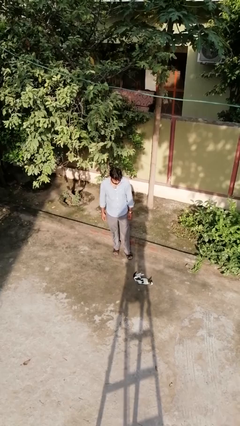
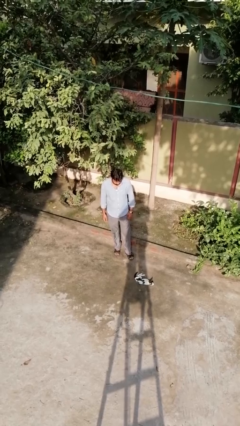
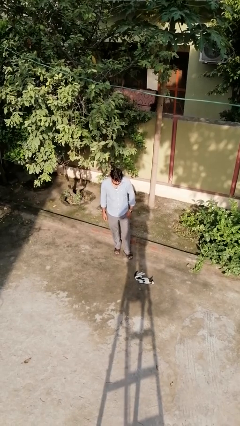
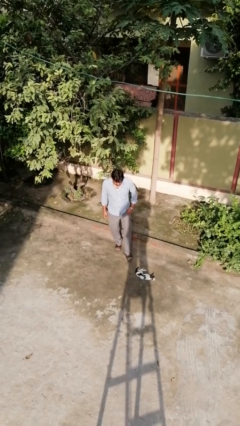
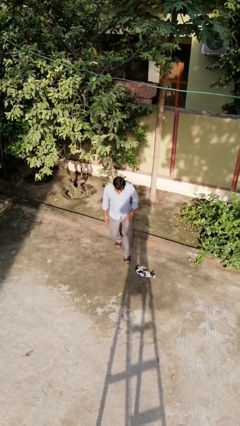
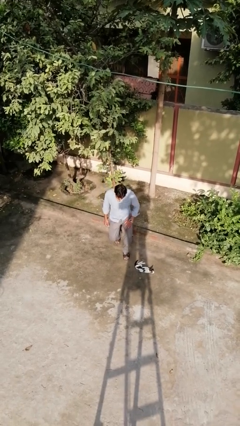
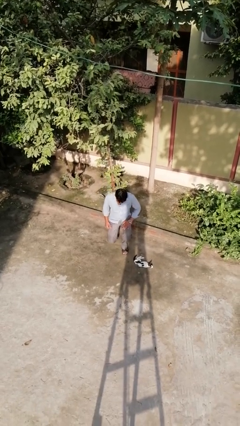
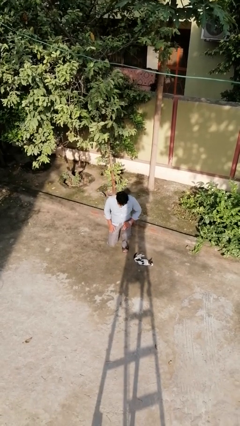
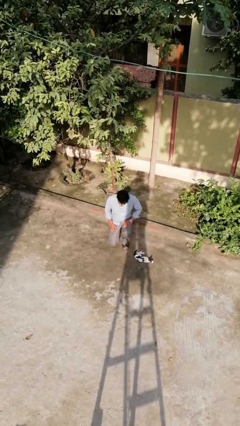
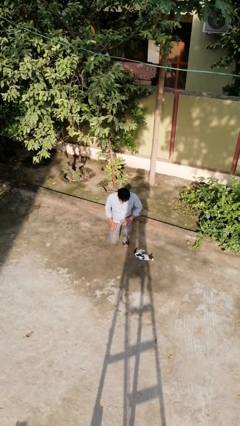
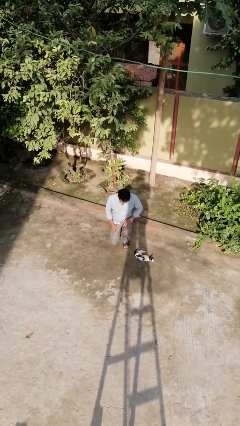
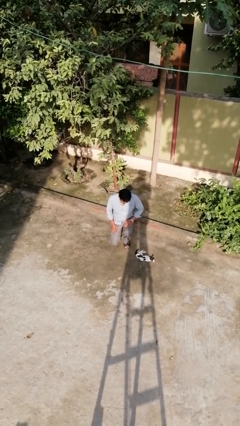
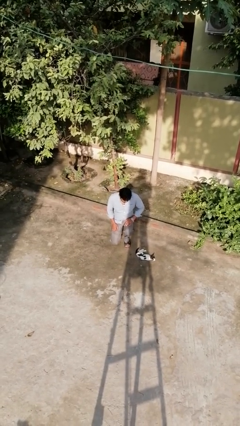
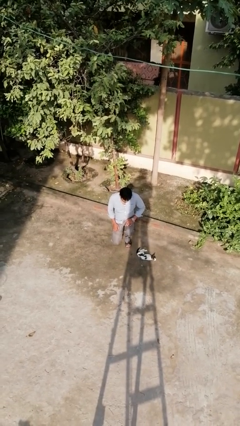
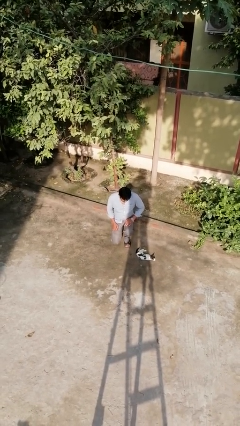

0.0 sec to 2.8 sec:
person kneels

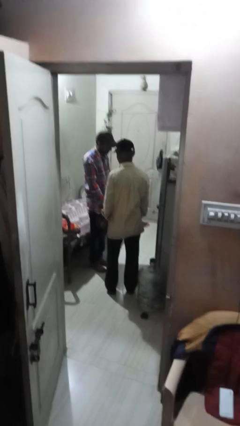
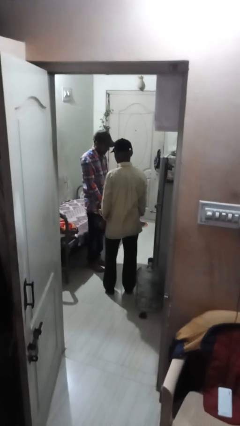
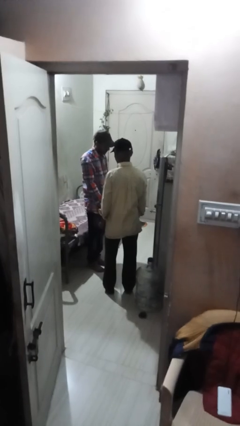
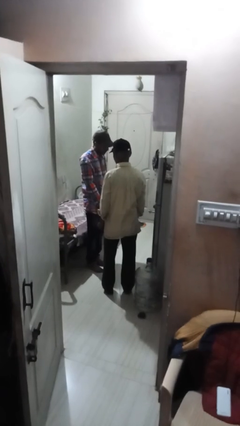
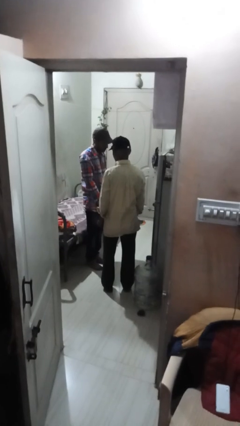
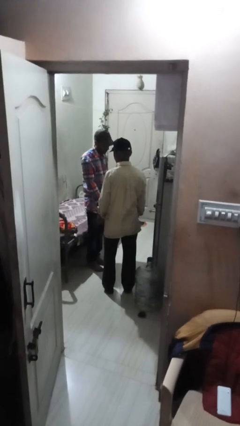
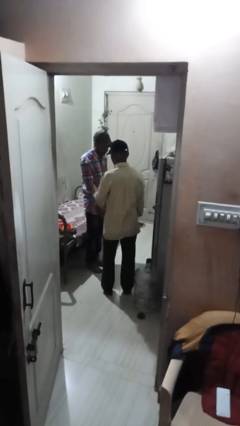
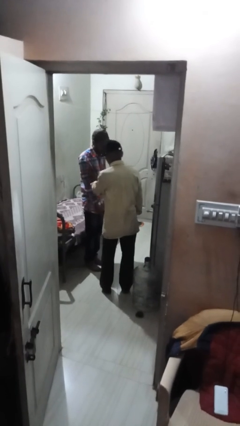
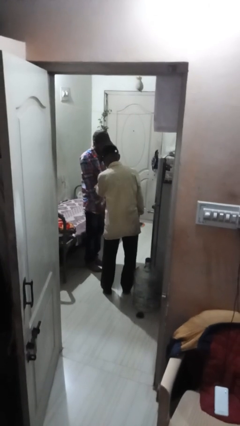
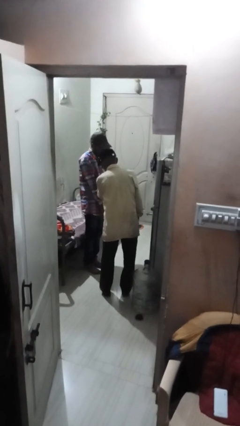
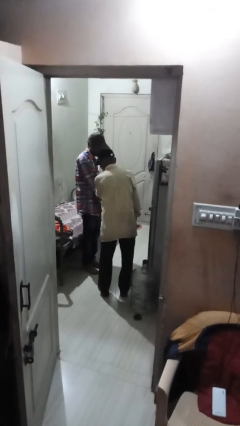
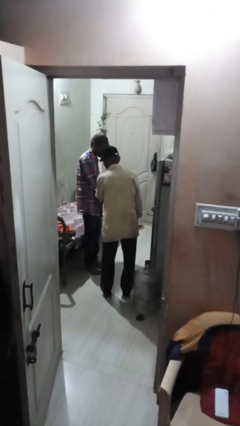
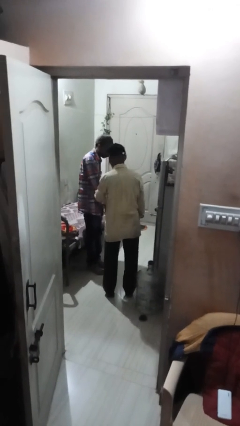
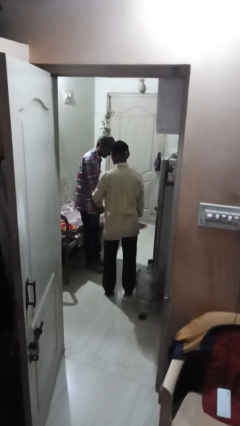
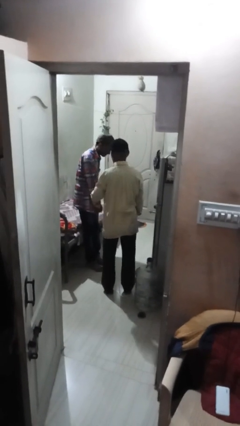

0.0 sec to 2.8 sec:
person tickles person

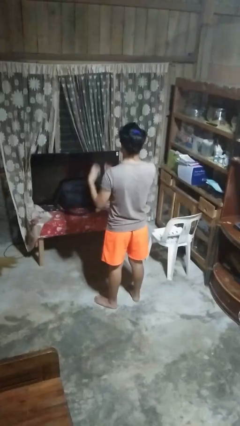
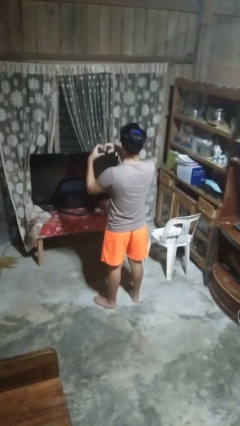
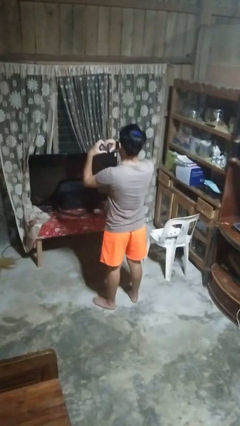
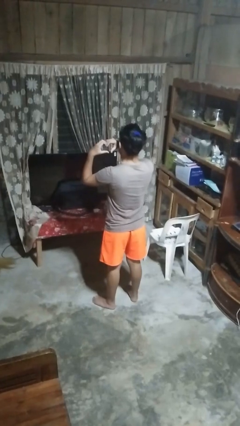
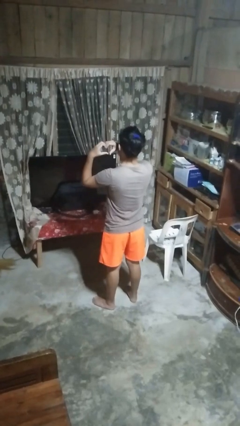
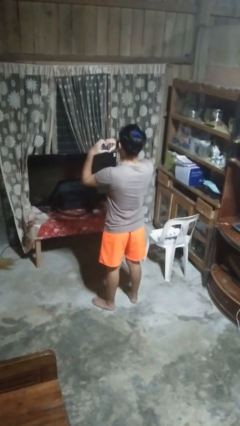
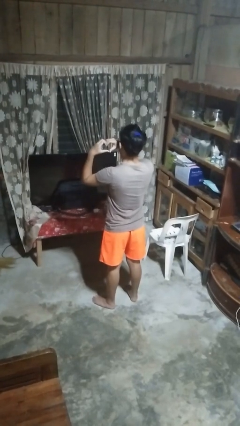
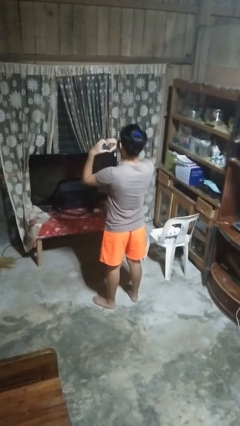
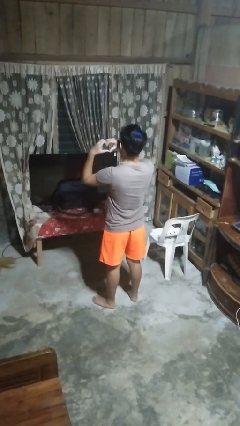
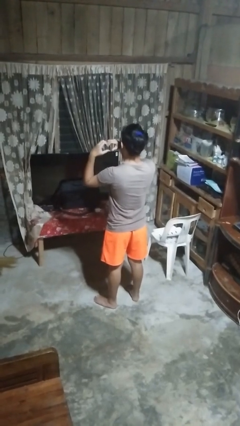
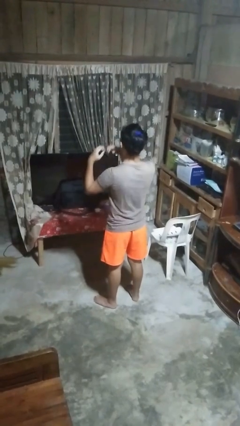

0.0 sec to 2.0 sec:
person gestures heart

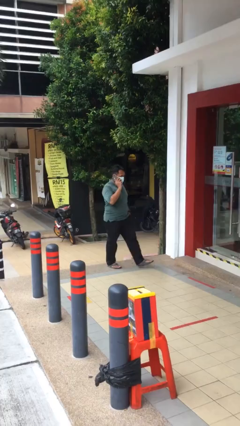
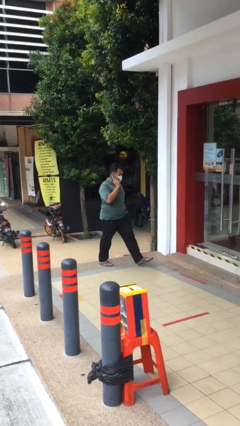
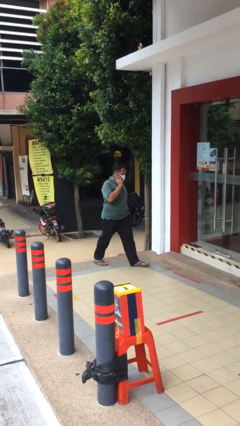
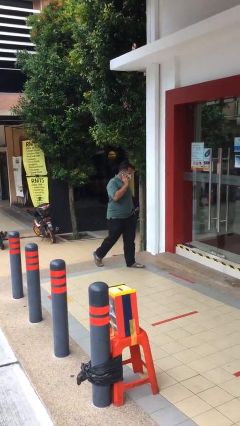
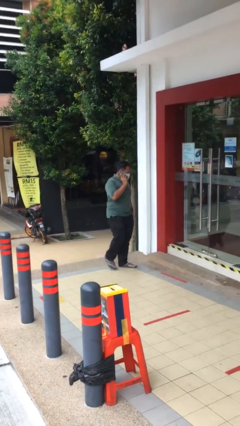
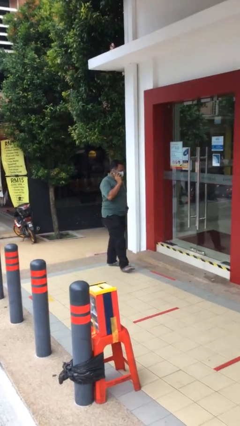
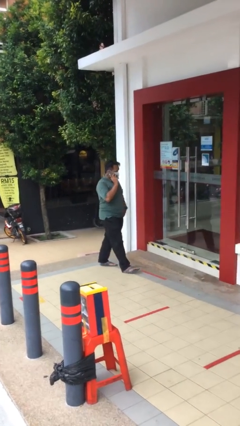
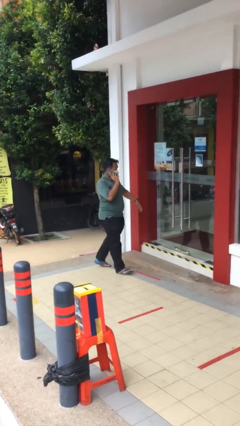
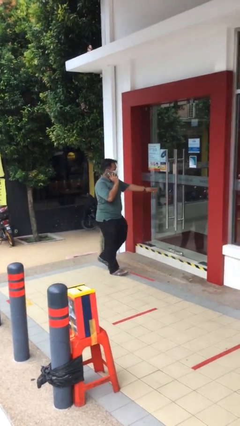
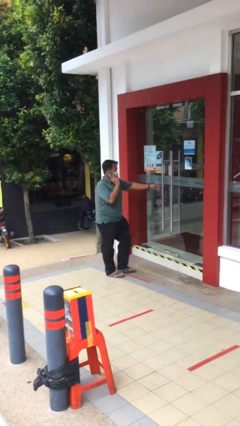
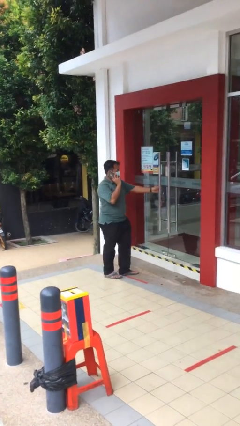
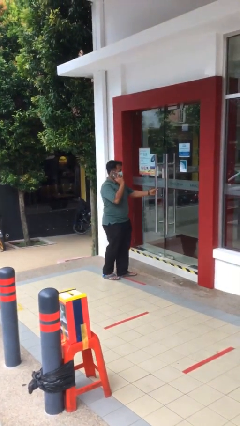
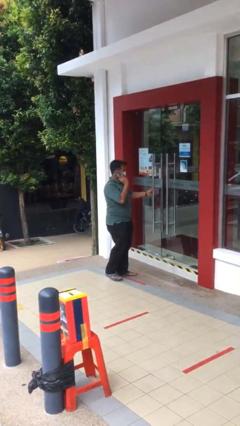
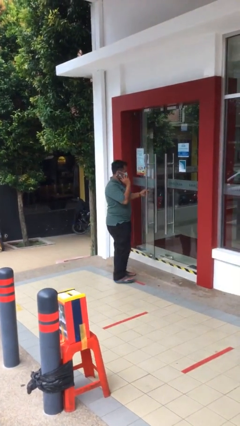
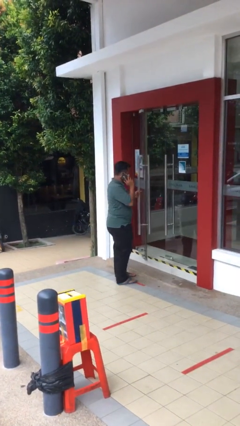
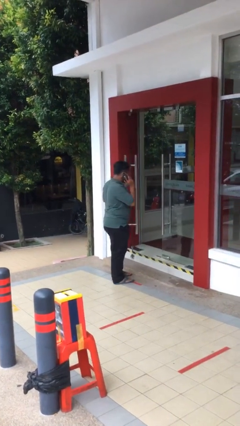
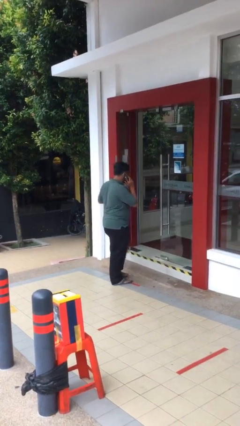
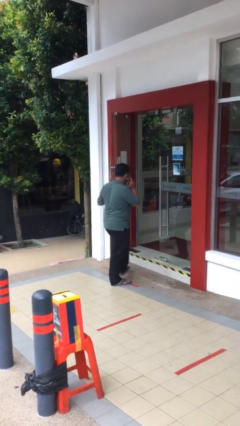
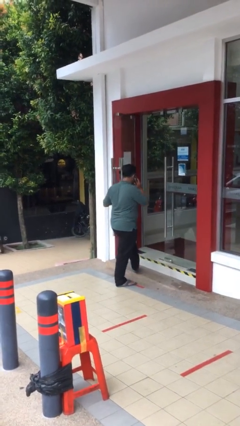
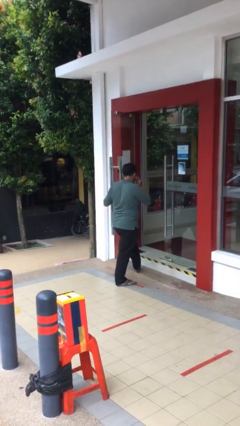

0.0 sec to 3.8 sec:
person opens facility door

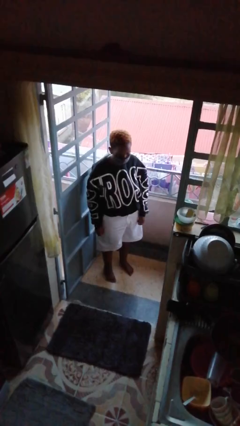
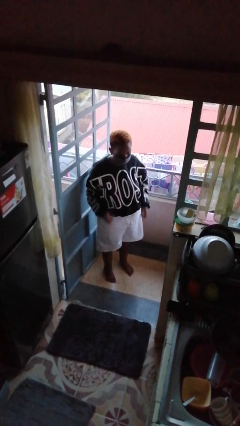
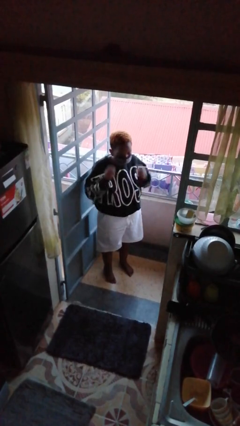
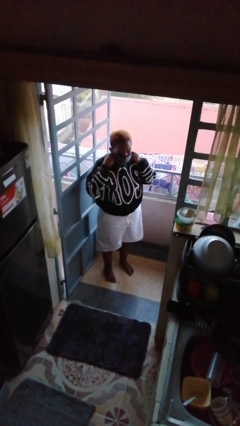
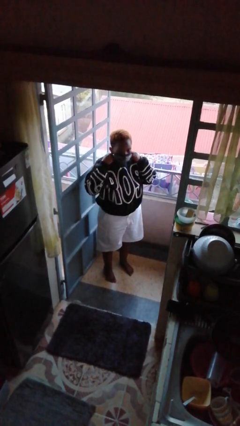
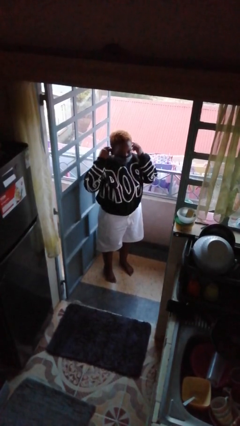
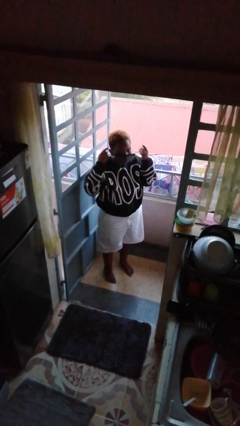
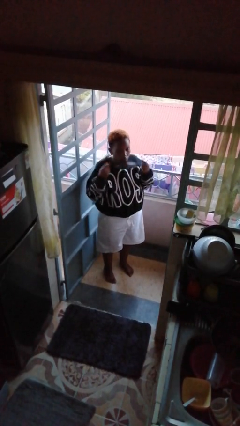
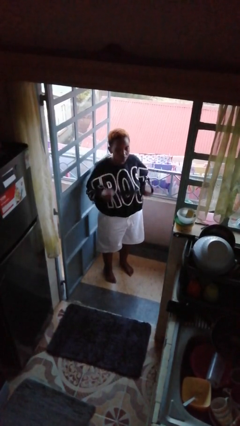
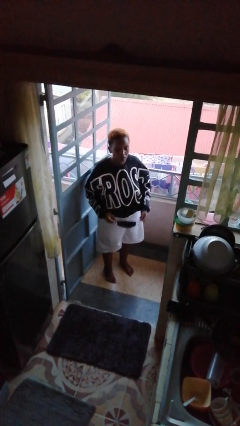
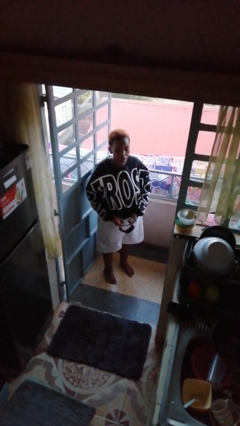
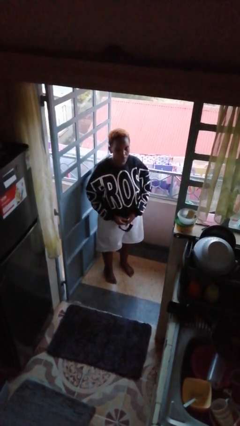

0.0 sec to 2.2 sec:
person takes off facemask

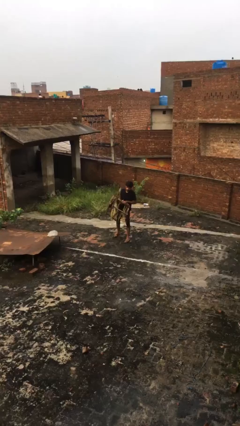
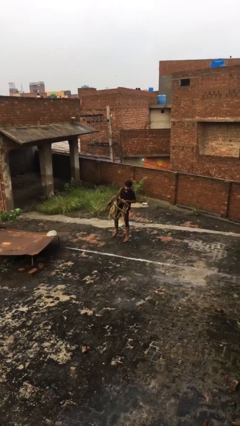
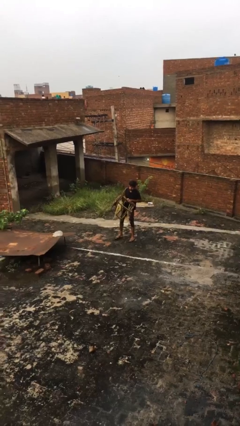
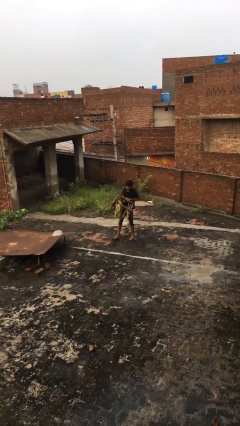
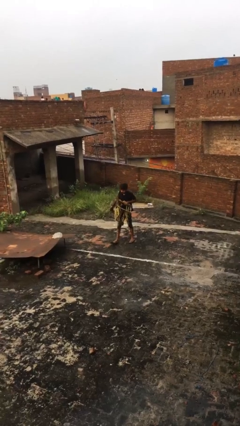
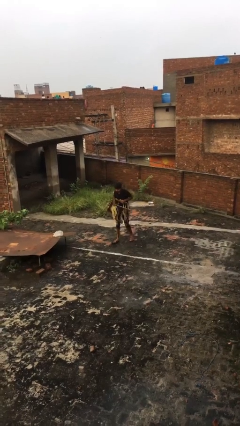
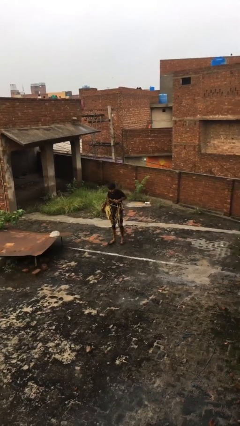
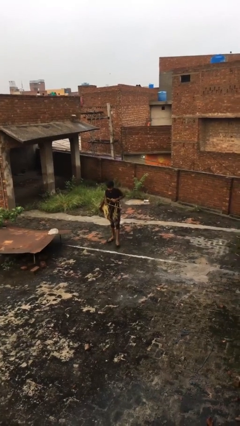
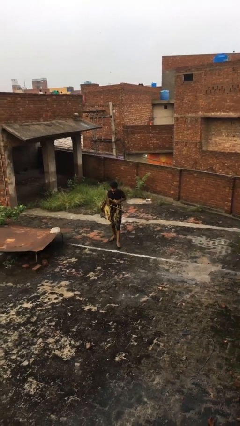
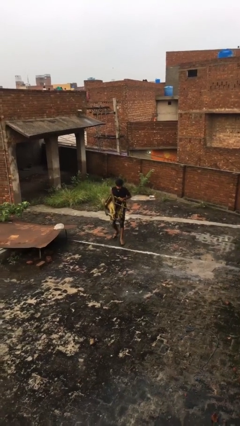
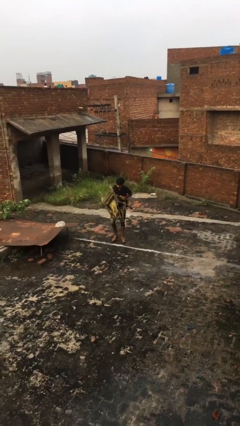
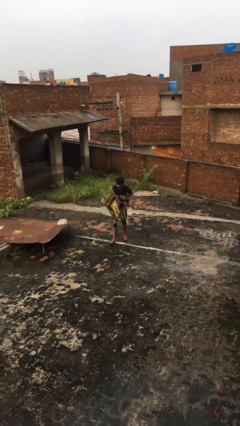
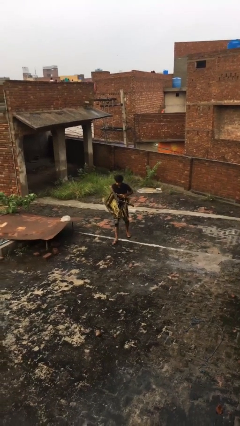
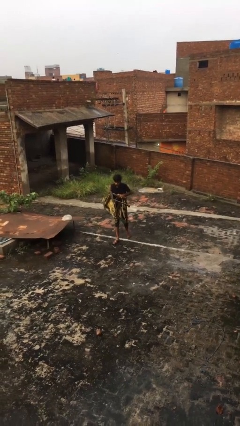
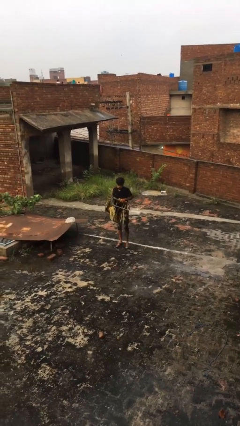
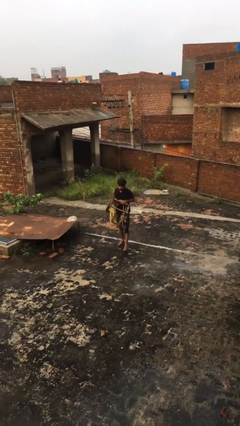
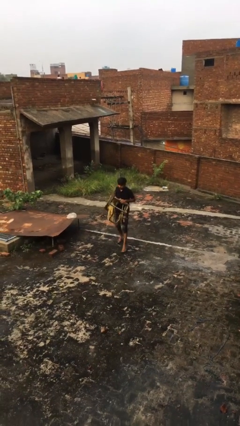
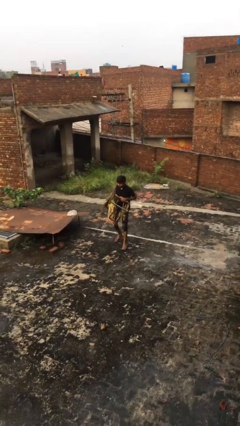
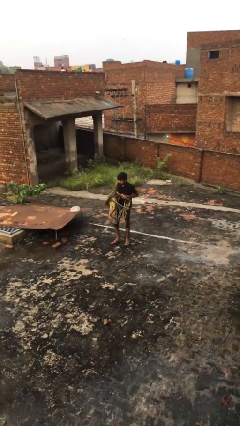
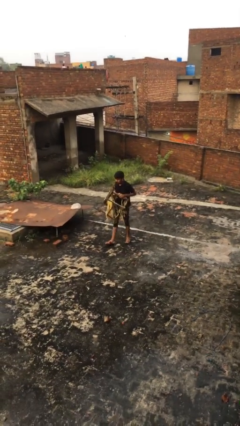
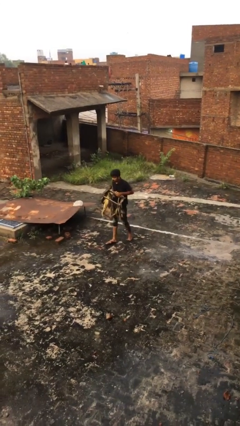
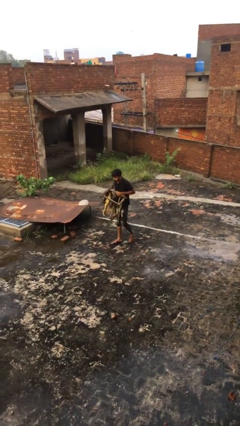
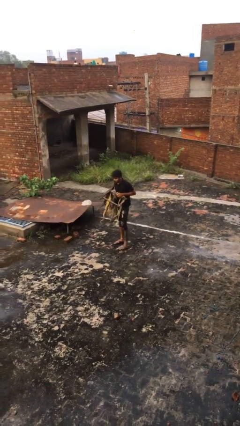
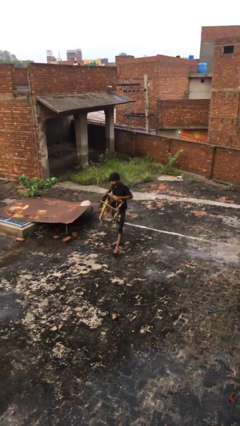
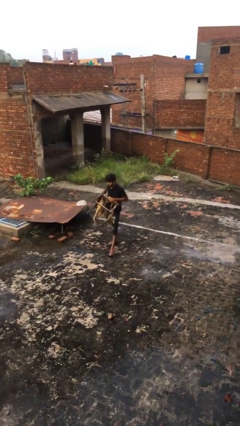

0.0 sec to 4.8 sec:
person carries heavy object
